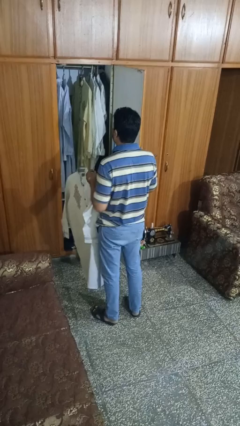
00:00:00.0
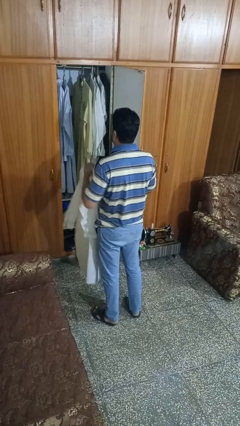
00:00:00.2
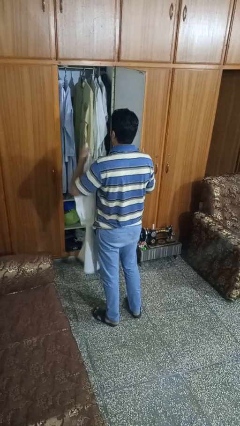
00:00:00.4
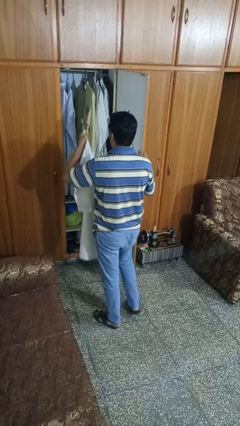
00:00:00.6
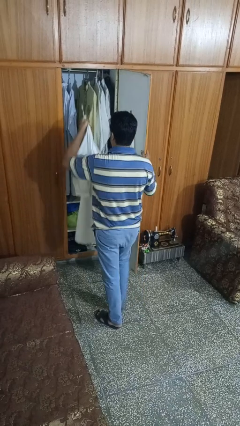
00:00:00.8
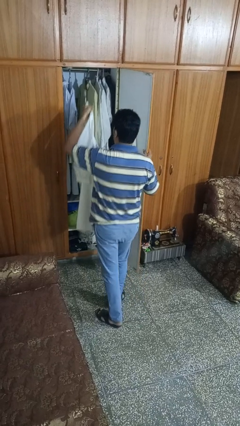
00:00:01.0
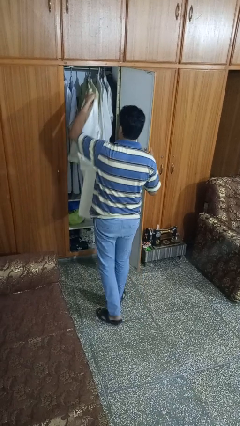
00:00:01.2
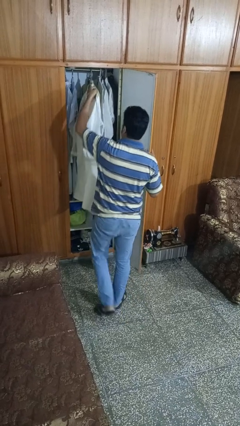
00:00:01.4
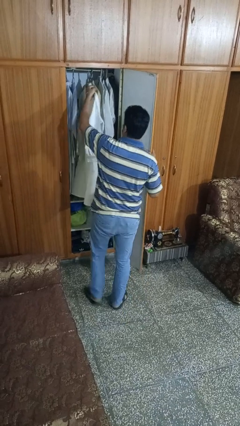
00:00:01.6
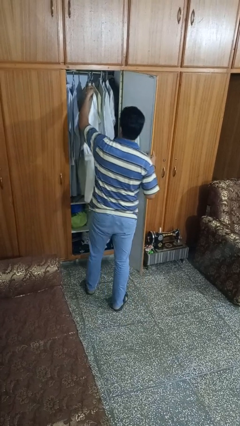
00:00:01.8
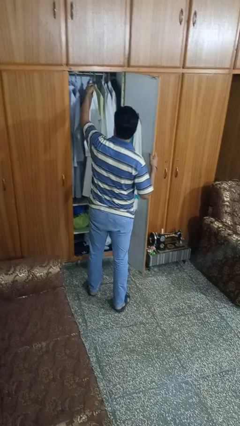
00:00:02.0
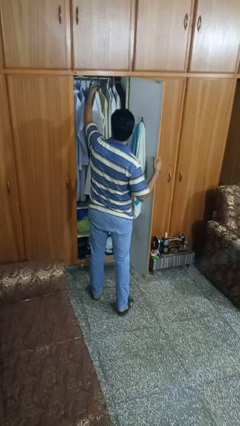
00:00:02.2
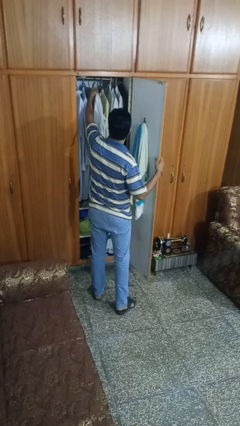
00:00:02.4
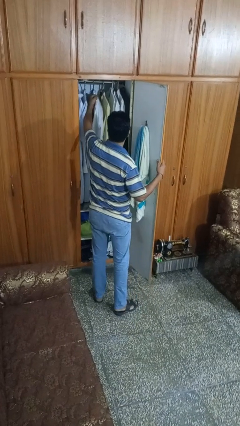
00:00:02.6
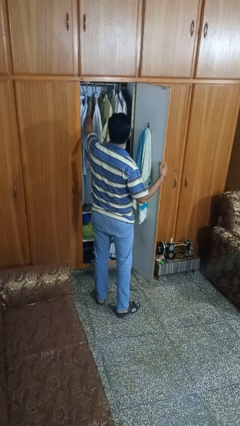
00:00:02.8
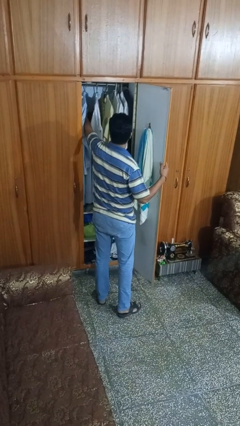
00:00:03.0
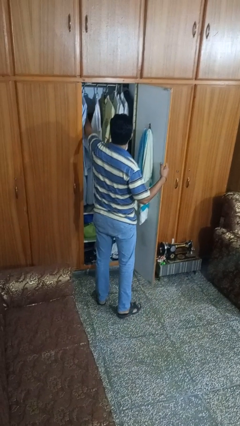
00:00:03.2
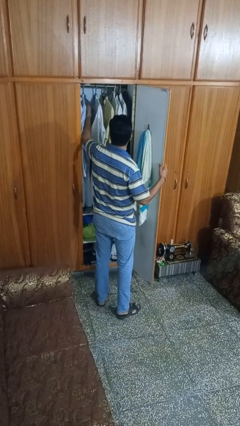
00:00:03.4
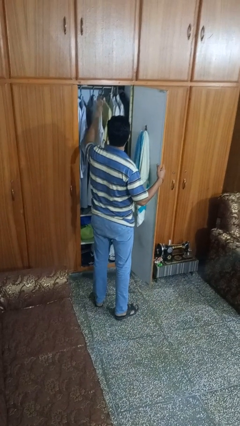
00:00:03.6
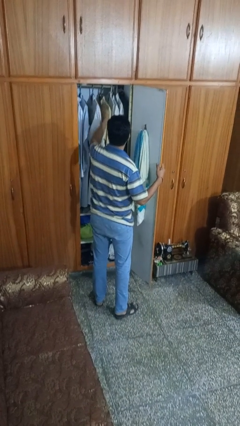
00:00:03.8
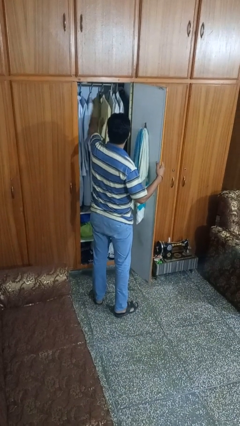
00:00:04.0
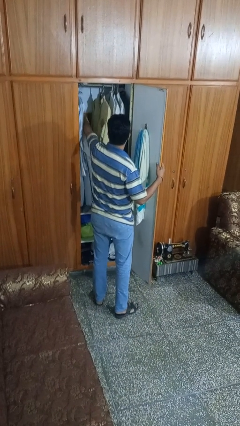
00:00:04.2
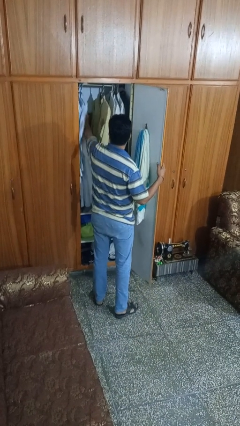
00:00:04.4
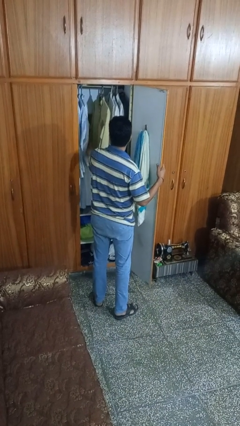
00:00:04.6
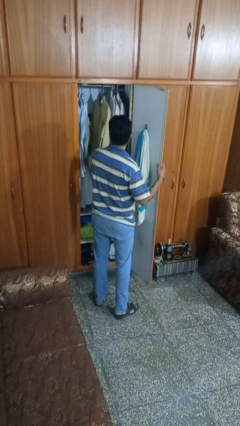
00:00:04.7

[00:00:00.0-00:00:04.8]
person puts clothes into dresser

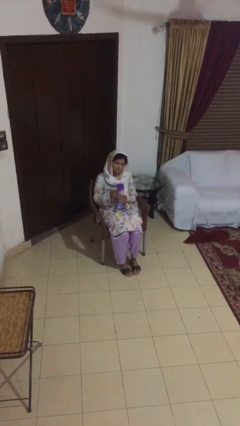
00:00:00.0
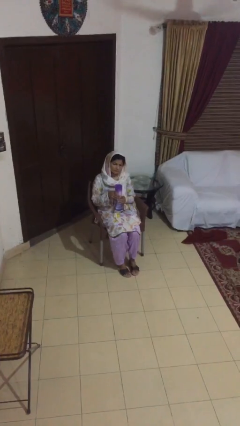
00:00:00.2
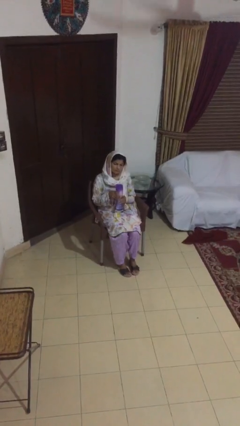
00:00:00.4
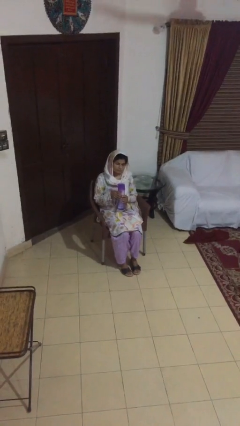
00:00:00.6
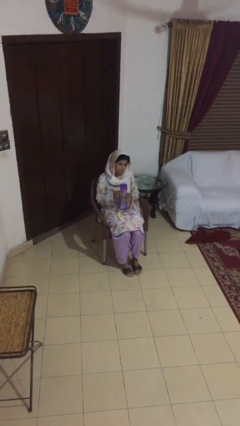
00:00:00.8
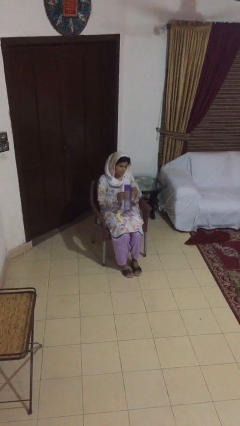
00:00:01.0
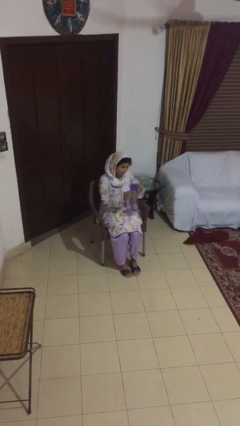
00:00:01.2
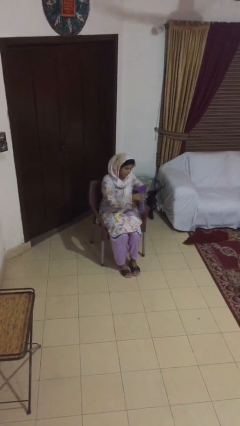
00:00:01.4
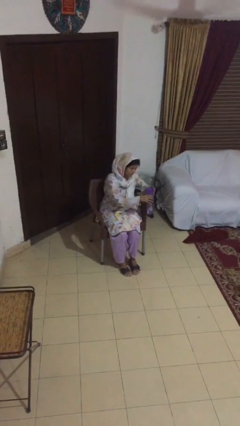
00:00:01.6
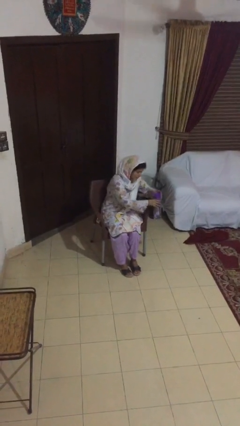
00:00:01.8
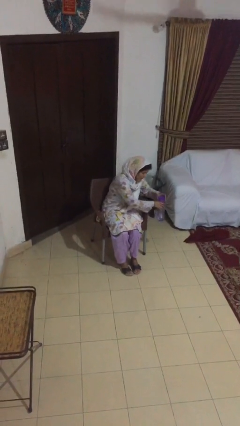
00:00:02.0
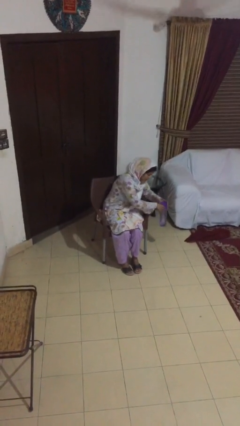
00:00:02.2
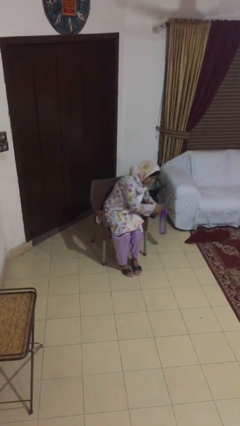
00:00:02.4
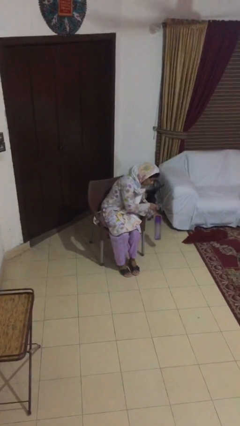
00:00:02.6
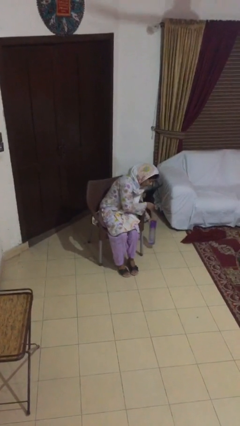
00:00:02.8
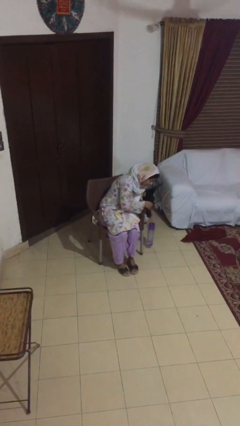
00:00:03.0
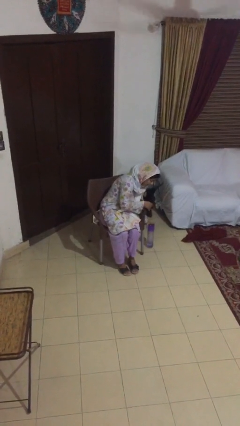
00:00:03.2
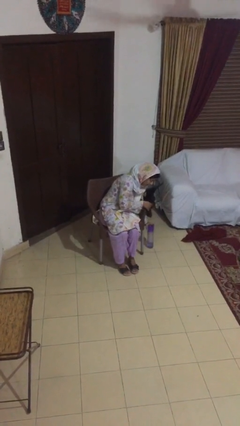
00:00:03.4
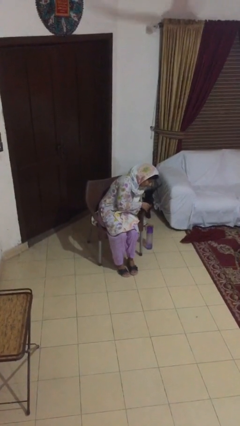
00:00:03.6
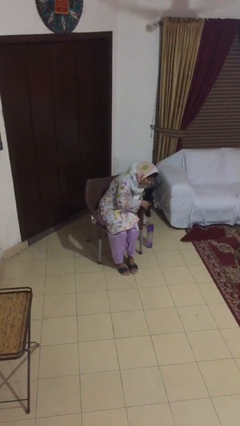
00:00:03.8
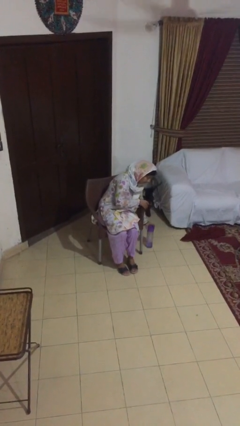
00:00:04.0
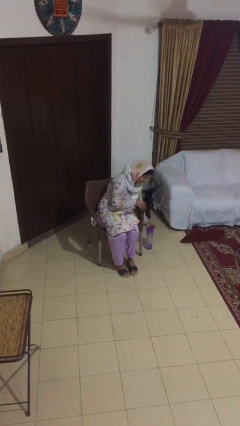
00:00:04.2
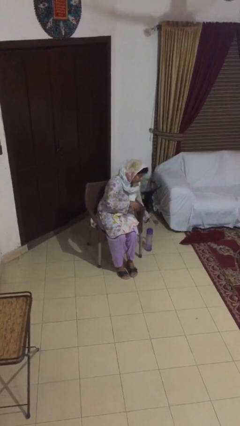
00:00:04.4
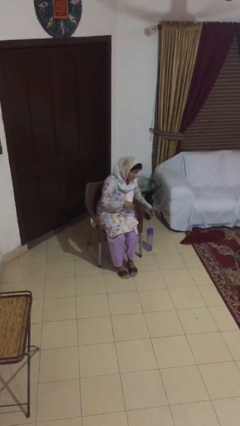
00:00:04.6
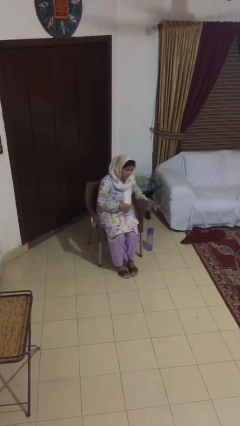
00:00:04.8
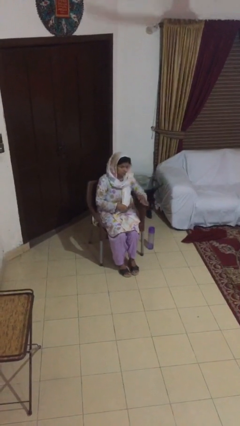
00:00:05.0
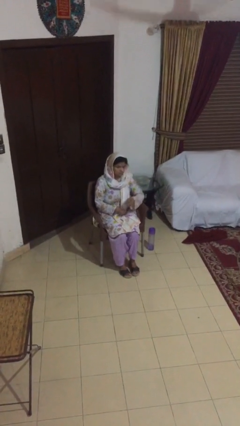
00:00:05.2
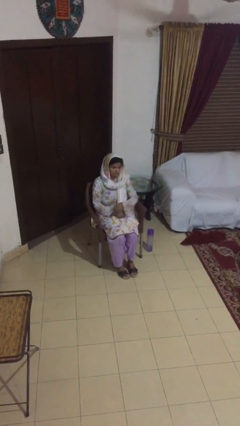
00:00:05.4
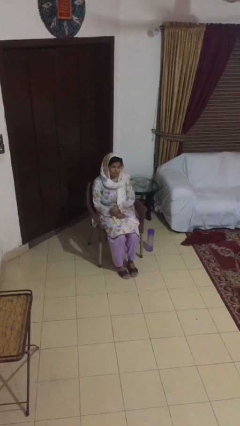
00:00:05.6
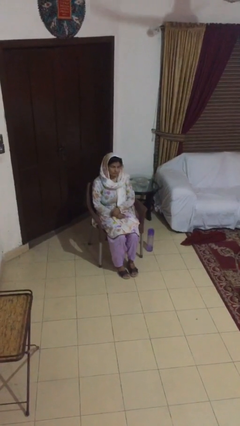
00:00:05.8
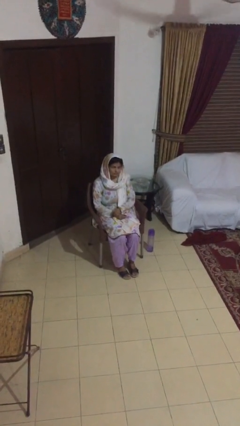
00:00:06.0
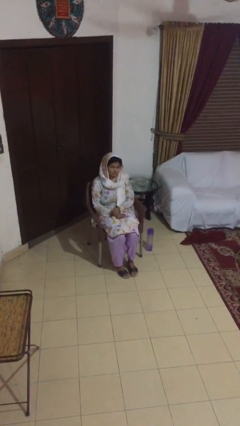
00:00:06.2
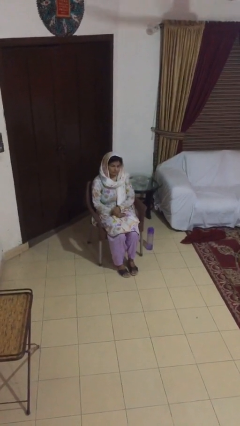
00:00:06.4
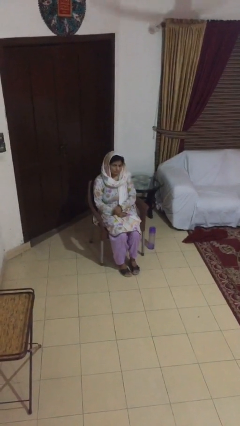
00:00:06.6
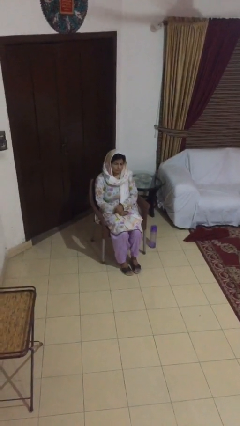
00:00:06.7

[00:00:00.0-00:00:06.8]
person puts down object on floor

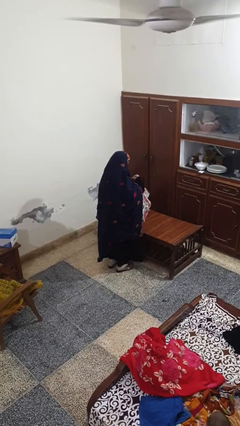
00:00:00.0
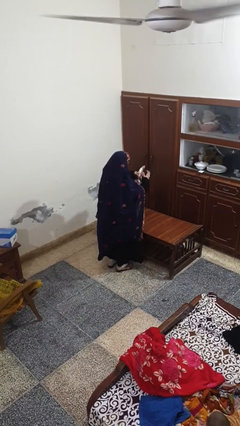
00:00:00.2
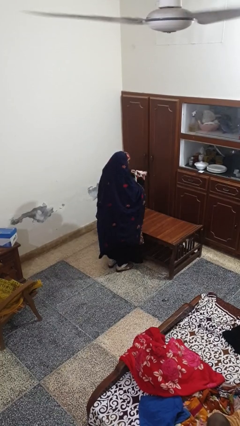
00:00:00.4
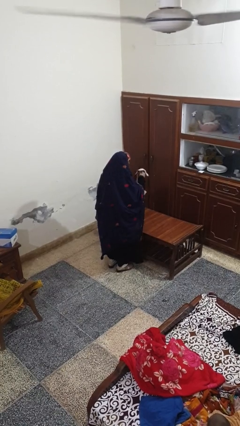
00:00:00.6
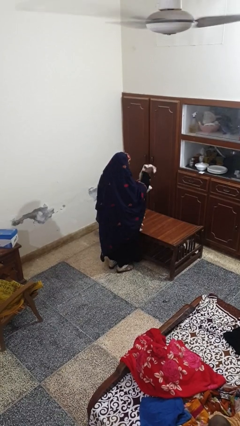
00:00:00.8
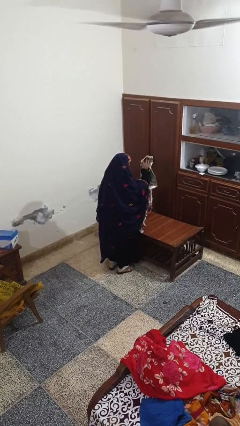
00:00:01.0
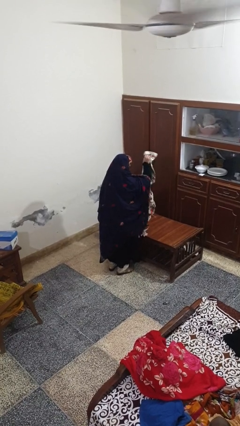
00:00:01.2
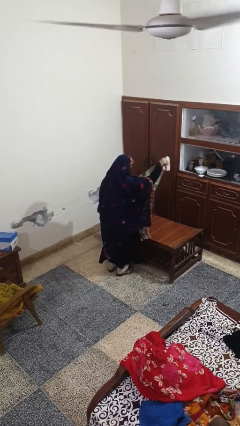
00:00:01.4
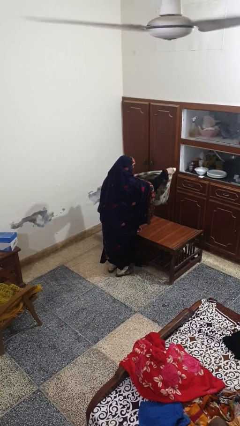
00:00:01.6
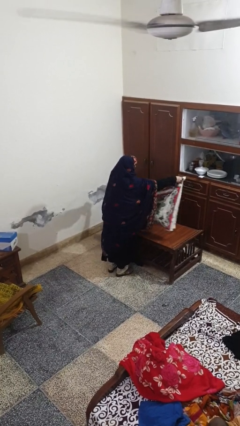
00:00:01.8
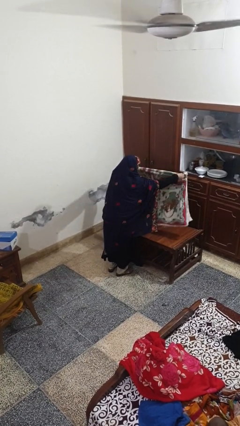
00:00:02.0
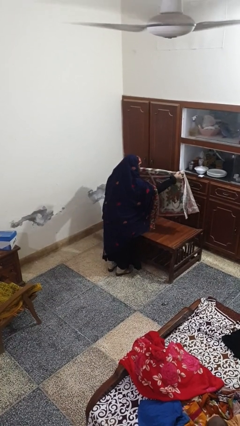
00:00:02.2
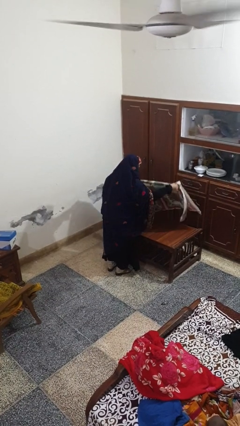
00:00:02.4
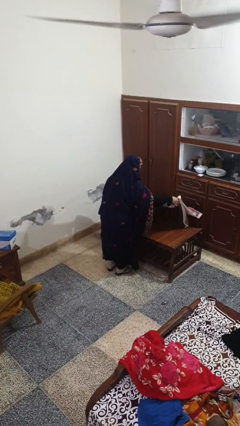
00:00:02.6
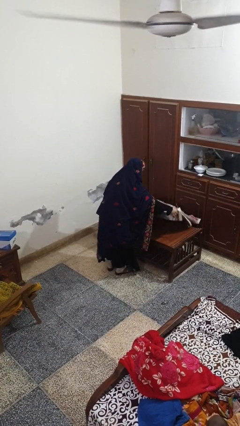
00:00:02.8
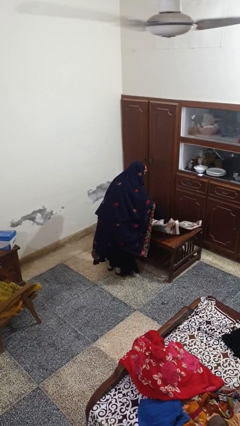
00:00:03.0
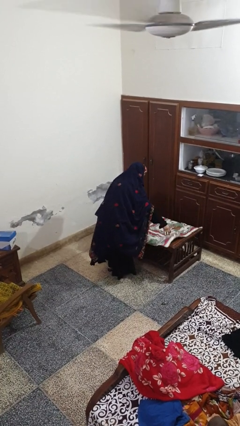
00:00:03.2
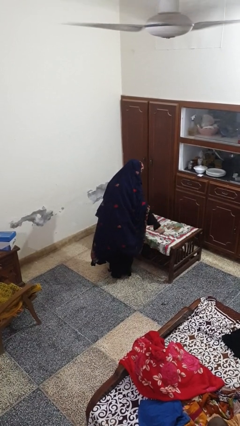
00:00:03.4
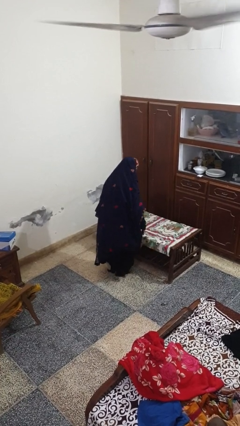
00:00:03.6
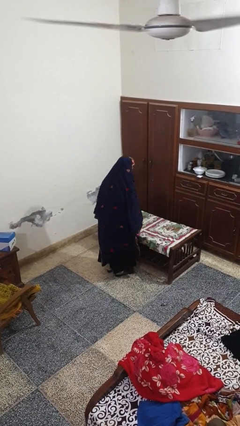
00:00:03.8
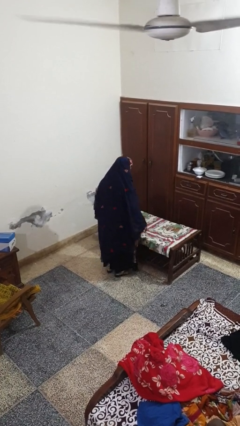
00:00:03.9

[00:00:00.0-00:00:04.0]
person spreads tablecloth

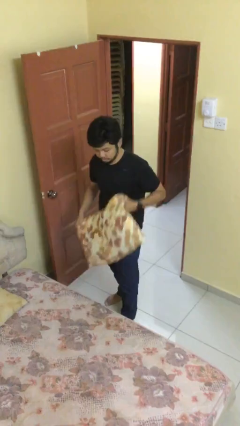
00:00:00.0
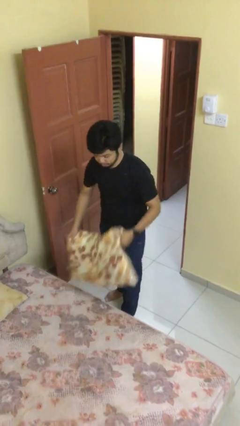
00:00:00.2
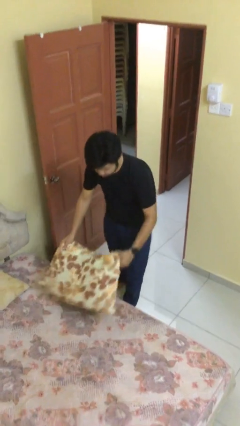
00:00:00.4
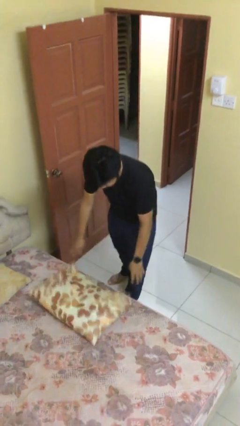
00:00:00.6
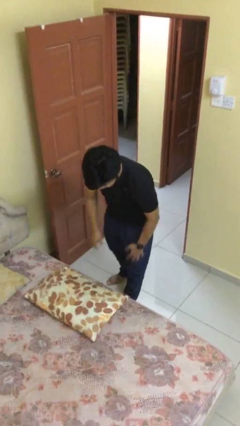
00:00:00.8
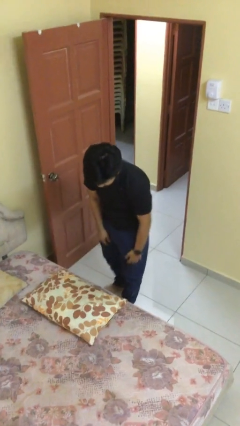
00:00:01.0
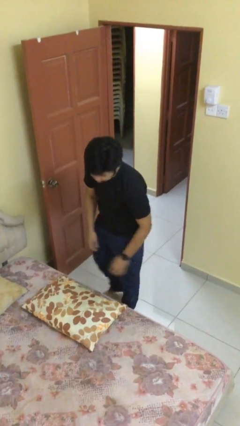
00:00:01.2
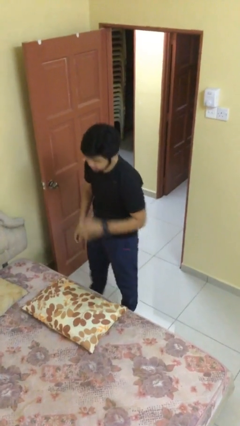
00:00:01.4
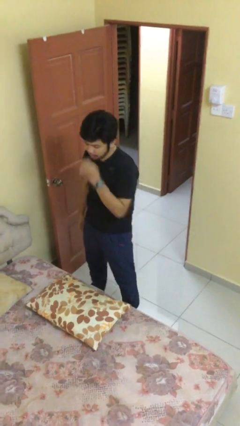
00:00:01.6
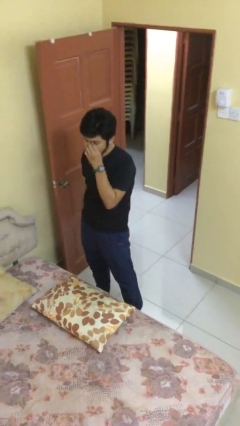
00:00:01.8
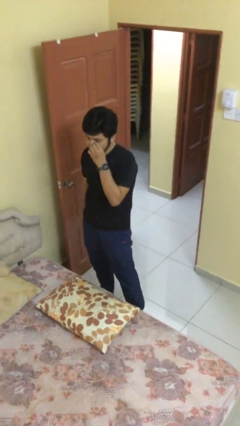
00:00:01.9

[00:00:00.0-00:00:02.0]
person puts down object on bed

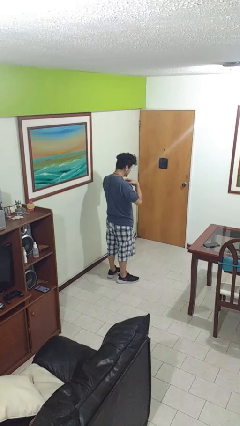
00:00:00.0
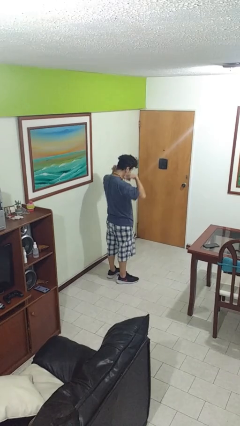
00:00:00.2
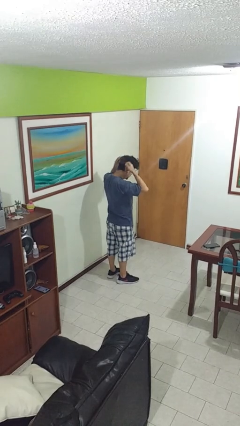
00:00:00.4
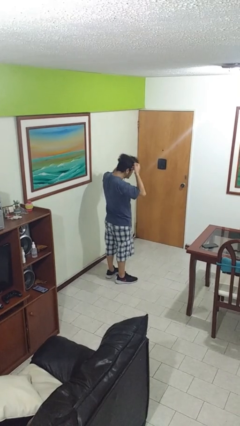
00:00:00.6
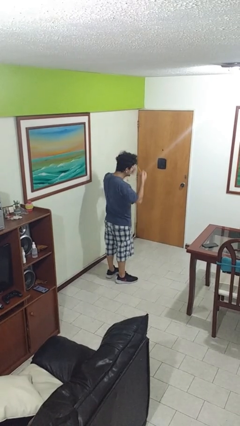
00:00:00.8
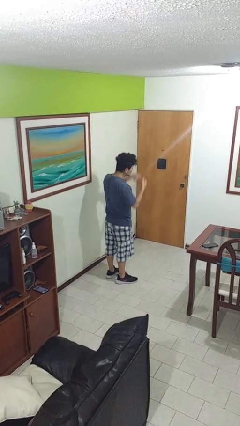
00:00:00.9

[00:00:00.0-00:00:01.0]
person takes off necklace
